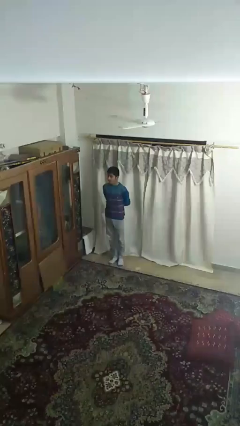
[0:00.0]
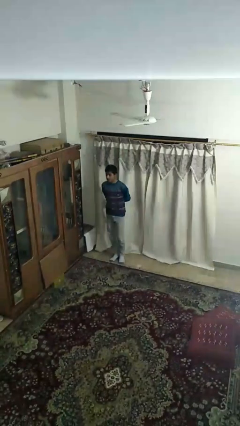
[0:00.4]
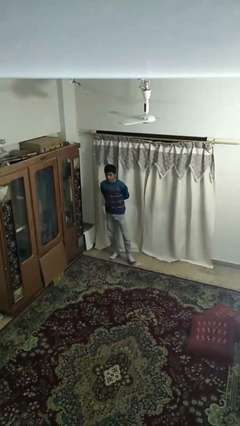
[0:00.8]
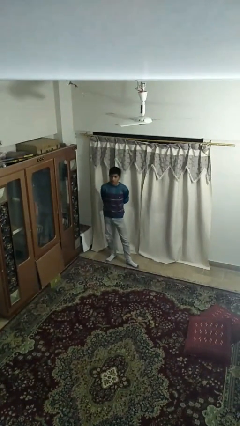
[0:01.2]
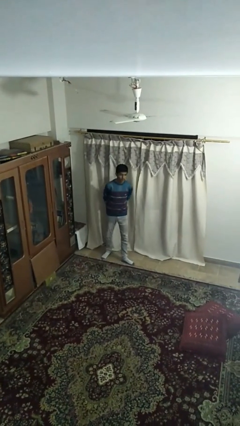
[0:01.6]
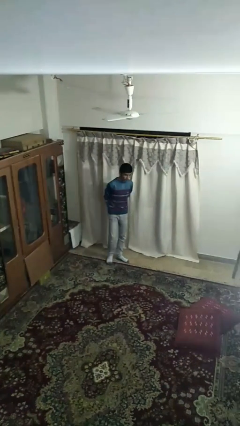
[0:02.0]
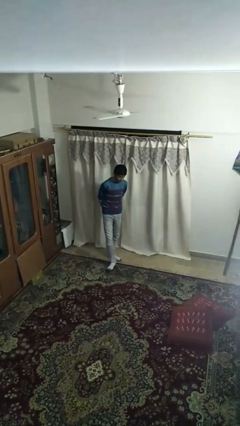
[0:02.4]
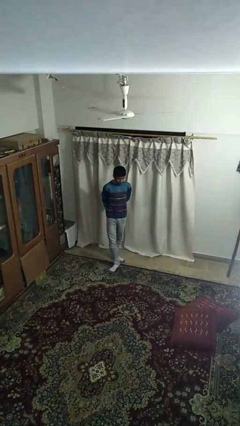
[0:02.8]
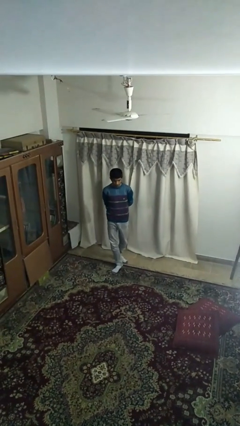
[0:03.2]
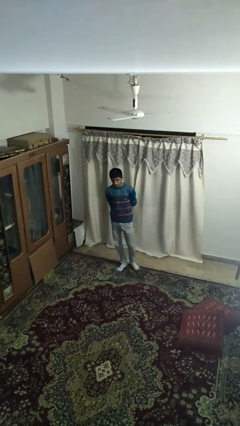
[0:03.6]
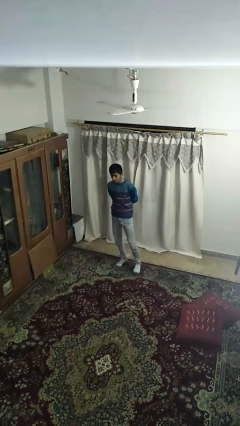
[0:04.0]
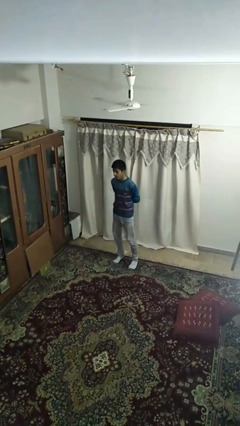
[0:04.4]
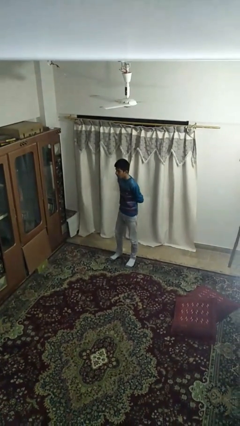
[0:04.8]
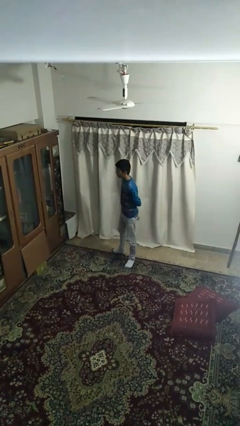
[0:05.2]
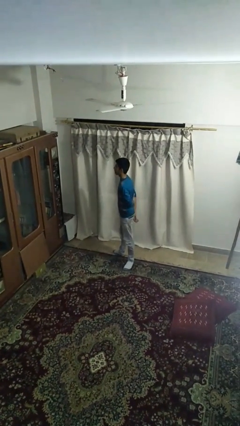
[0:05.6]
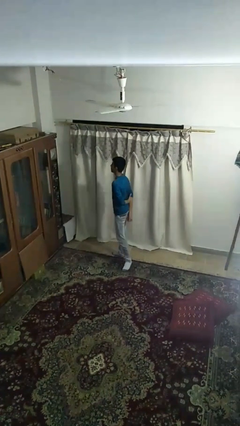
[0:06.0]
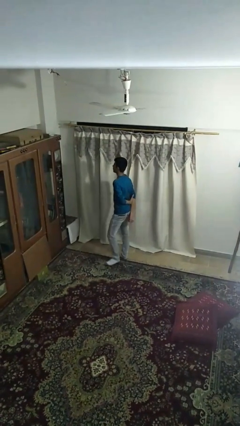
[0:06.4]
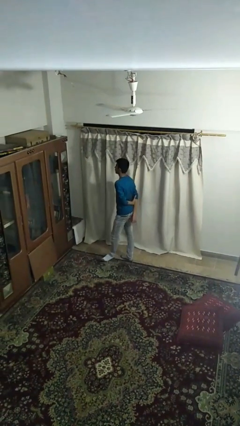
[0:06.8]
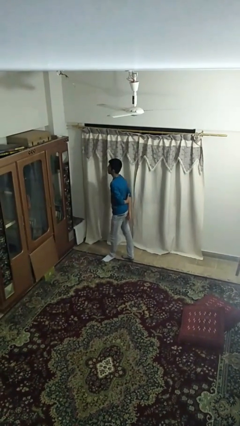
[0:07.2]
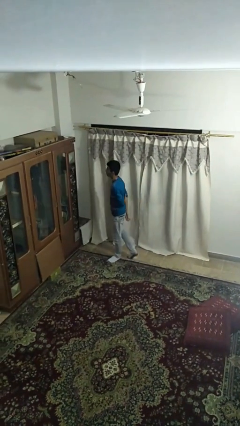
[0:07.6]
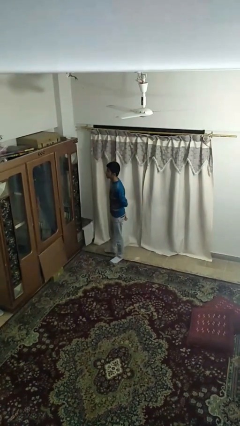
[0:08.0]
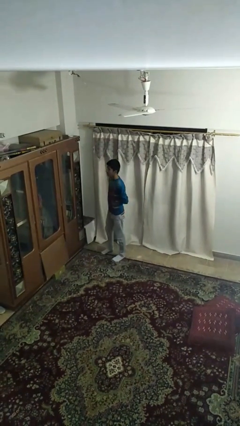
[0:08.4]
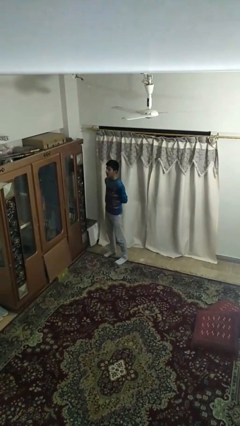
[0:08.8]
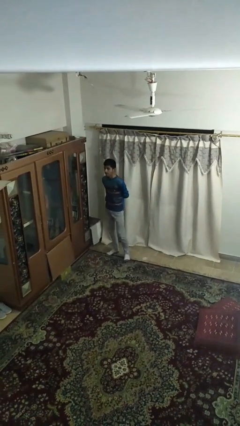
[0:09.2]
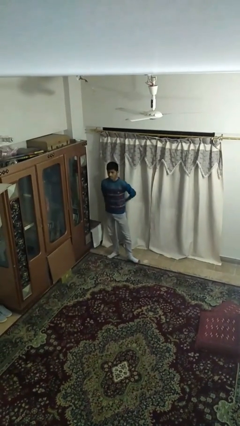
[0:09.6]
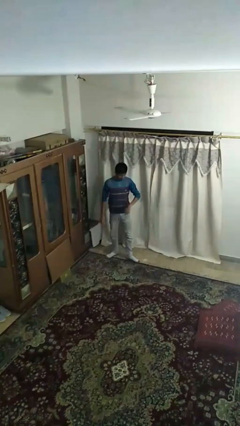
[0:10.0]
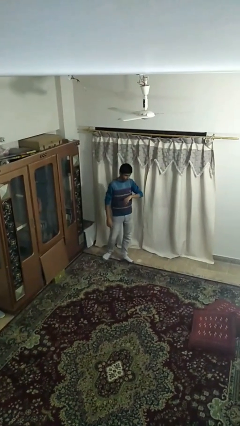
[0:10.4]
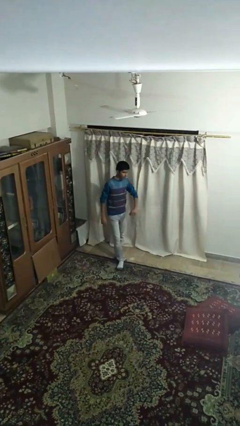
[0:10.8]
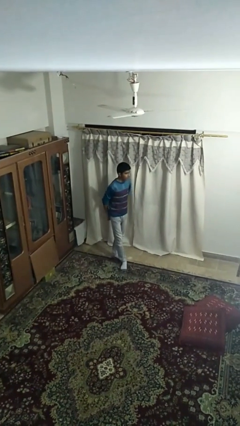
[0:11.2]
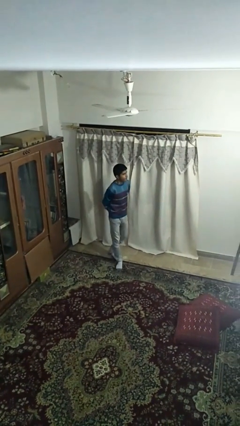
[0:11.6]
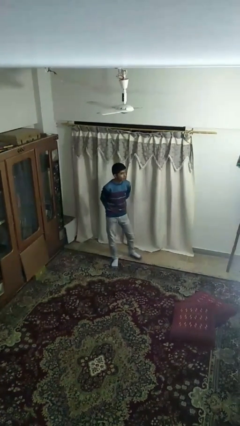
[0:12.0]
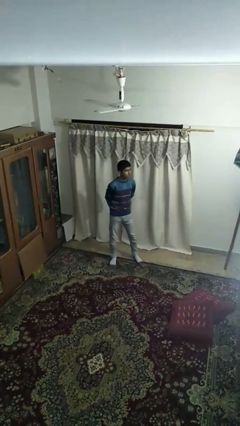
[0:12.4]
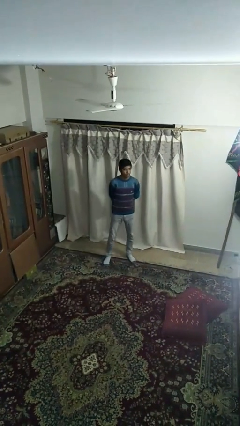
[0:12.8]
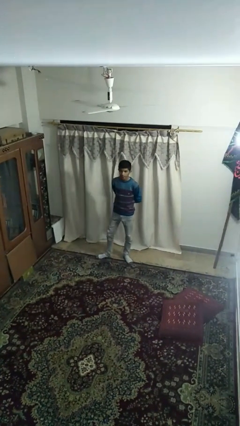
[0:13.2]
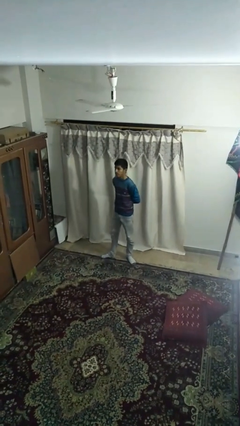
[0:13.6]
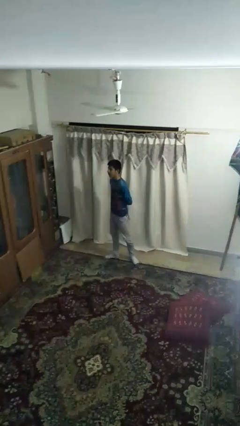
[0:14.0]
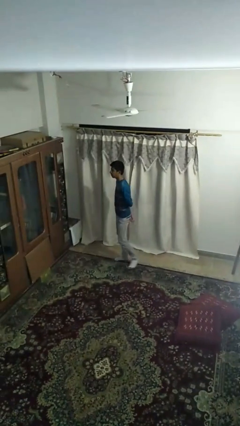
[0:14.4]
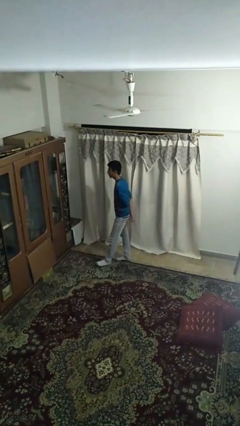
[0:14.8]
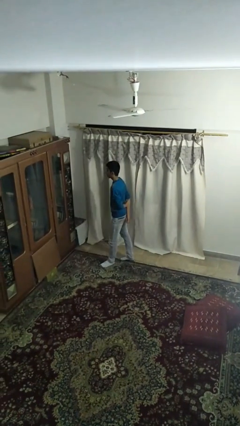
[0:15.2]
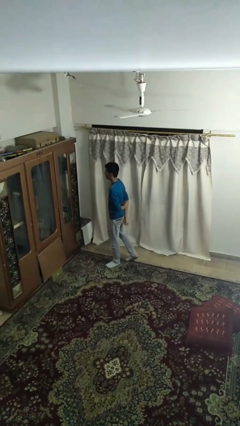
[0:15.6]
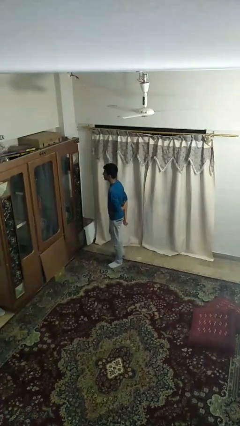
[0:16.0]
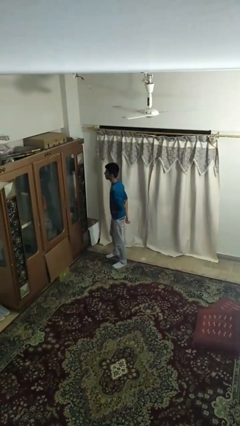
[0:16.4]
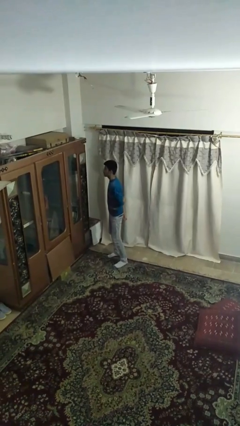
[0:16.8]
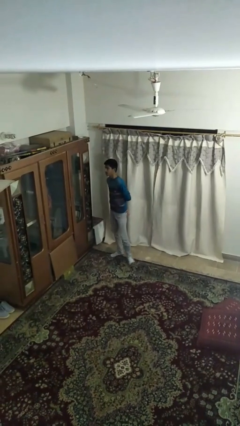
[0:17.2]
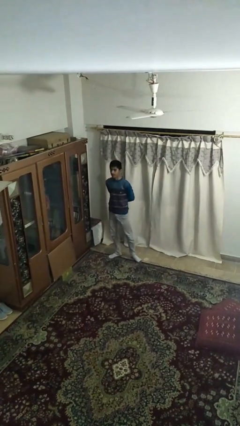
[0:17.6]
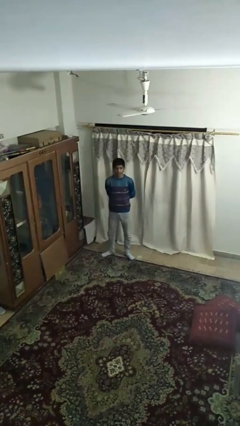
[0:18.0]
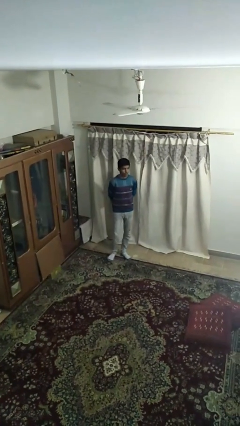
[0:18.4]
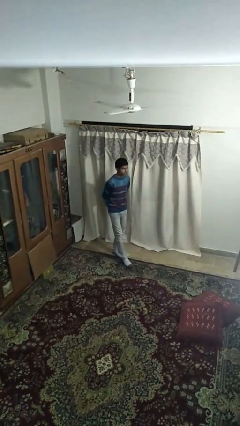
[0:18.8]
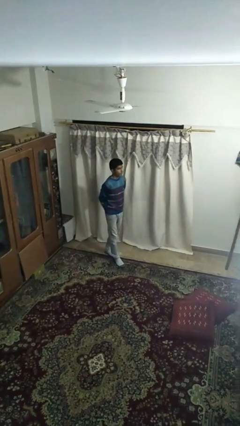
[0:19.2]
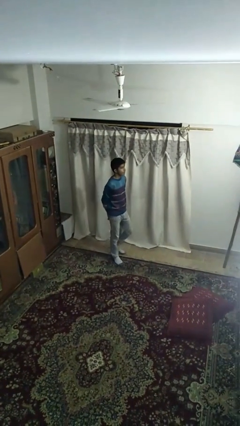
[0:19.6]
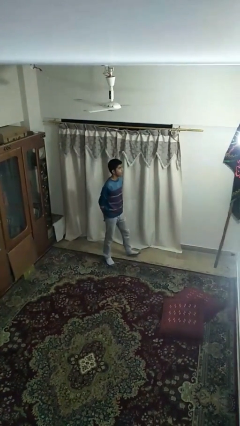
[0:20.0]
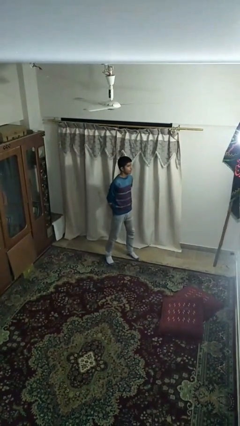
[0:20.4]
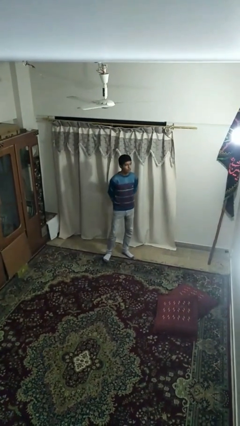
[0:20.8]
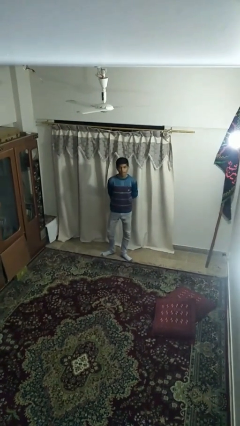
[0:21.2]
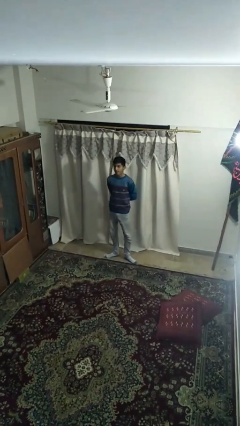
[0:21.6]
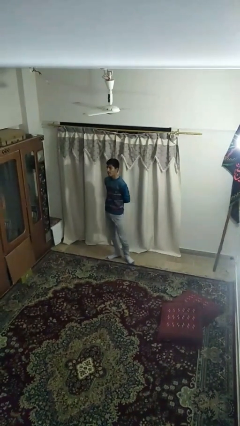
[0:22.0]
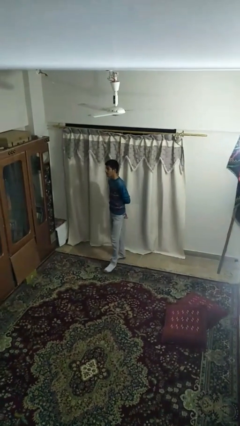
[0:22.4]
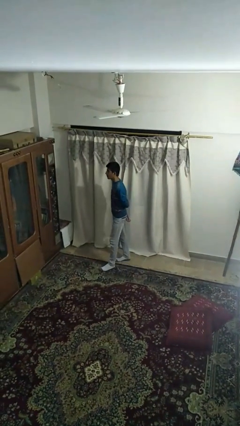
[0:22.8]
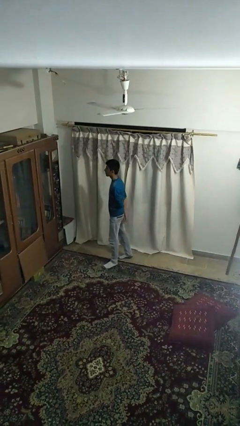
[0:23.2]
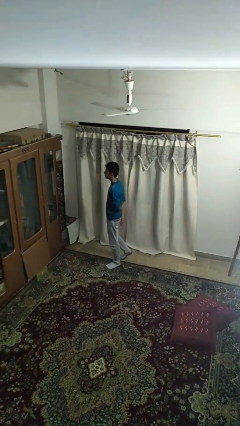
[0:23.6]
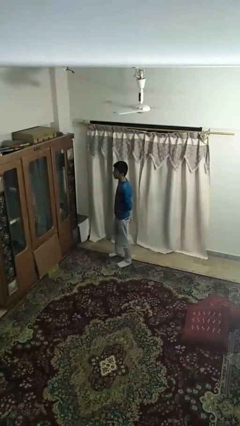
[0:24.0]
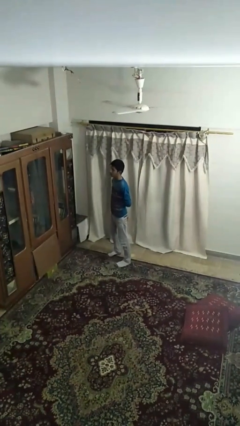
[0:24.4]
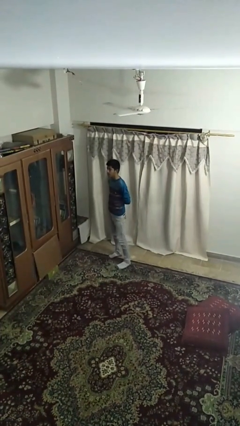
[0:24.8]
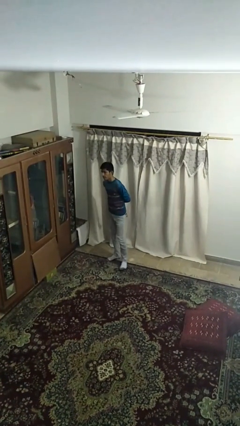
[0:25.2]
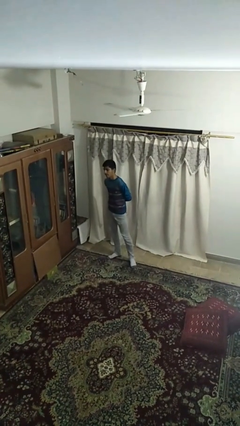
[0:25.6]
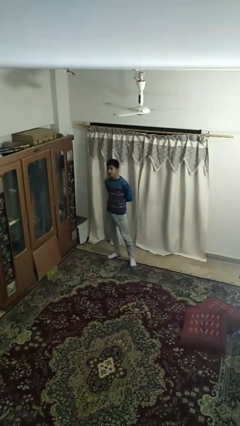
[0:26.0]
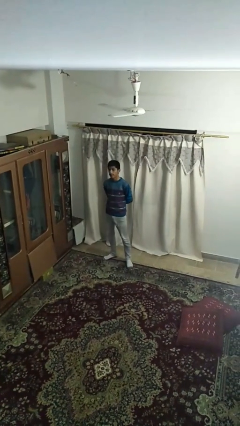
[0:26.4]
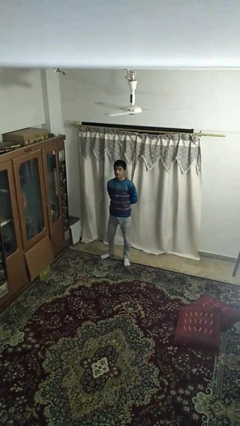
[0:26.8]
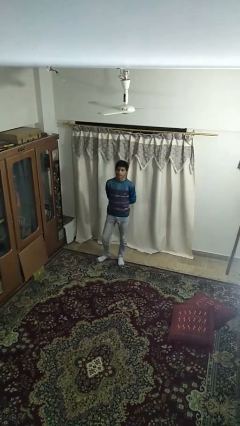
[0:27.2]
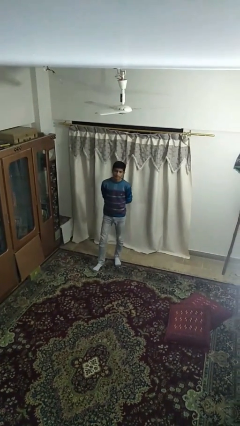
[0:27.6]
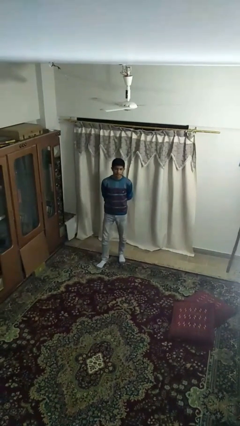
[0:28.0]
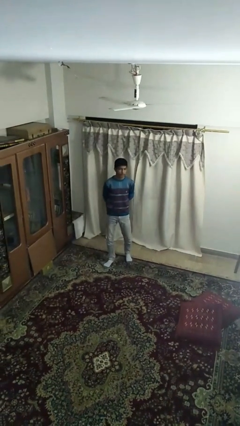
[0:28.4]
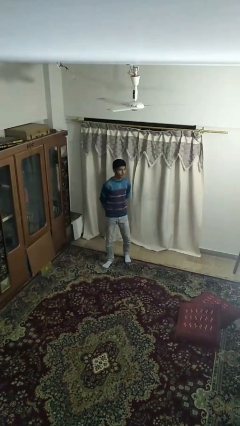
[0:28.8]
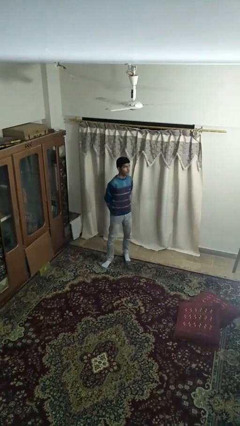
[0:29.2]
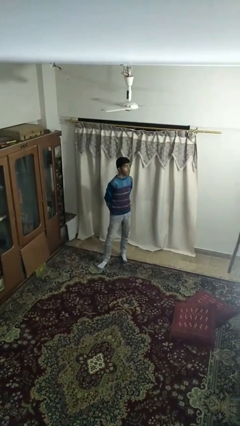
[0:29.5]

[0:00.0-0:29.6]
person walks

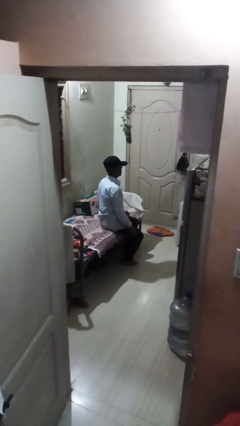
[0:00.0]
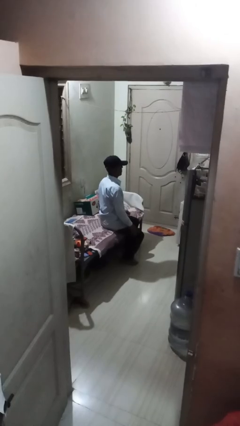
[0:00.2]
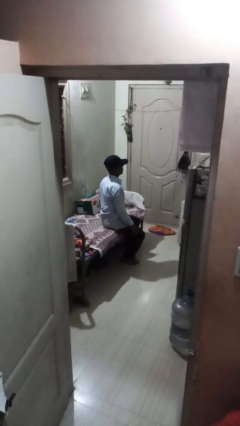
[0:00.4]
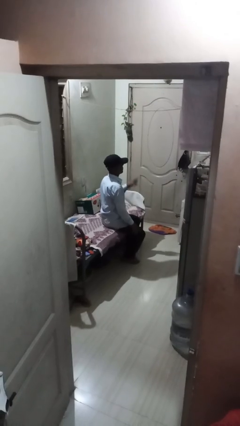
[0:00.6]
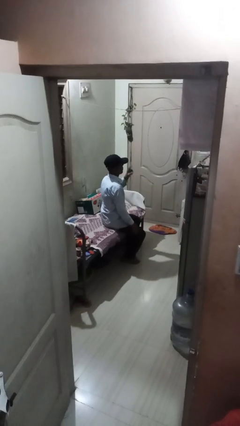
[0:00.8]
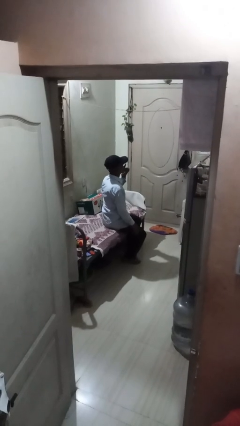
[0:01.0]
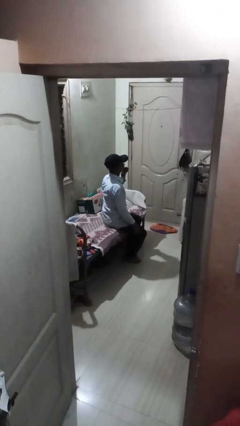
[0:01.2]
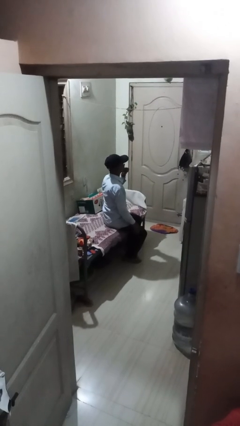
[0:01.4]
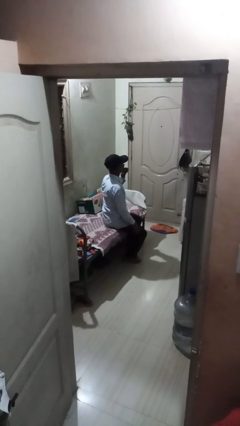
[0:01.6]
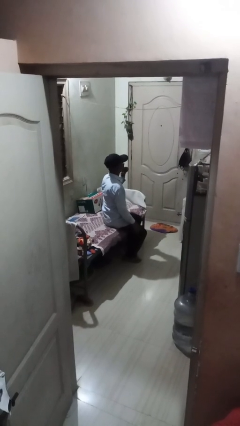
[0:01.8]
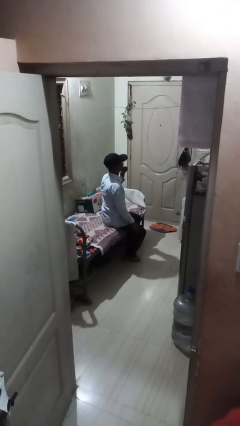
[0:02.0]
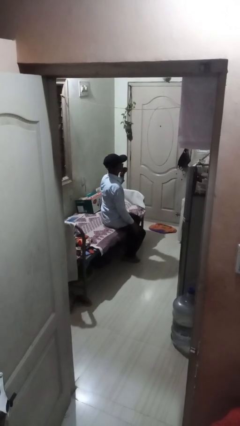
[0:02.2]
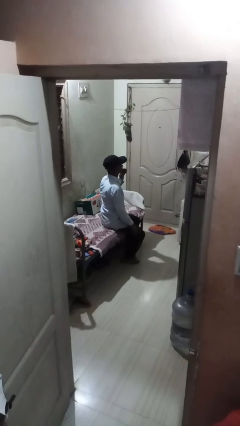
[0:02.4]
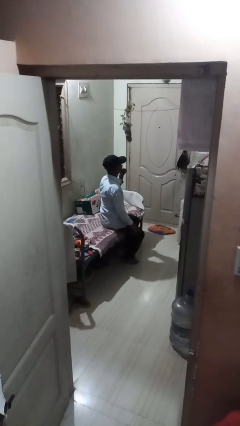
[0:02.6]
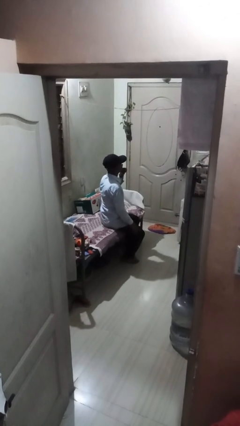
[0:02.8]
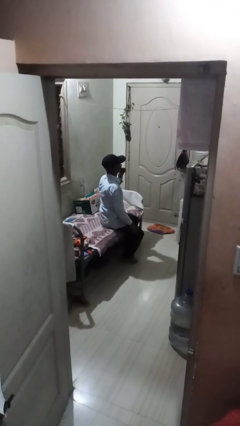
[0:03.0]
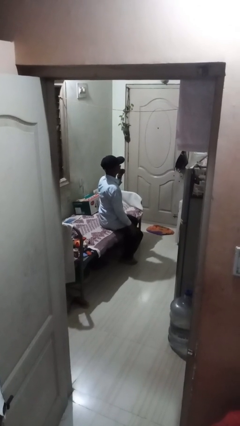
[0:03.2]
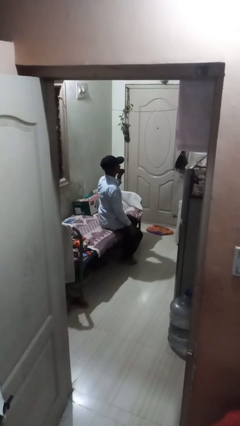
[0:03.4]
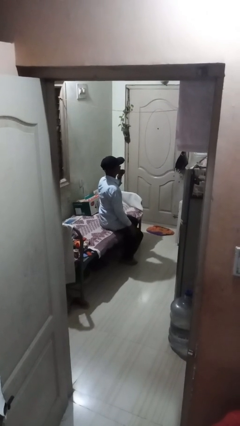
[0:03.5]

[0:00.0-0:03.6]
person gestures be quiet

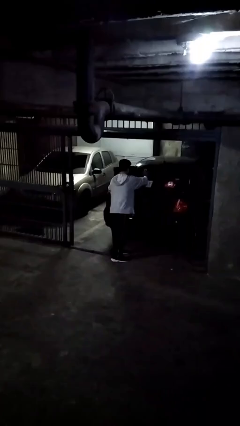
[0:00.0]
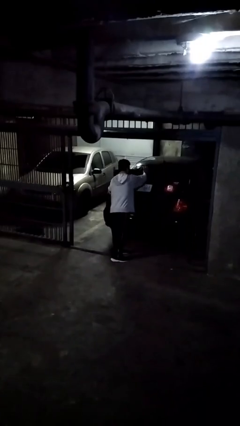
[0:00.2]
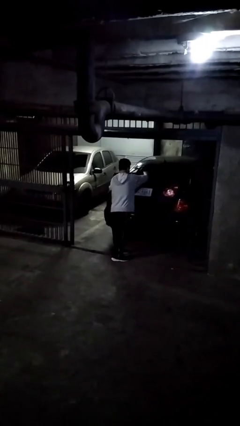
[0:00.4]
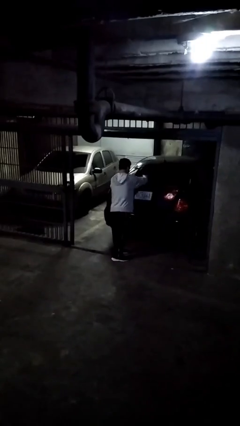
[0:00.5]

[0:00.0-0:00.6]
person closes car trunk
